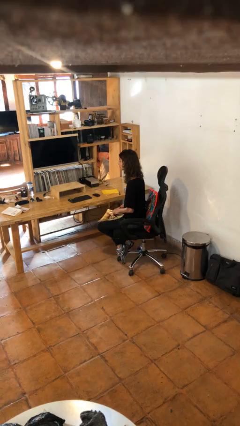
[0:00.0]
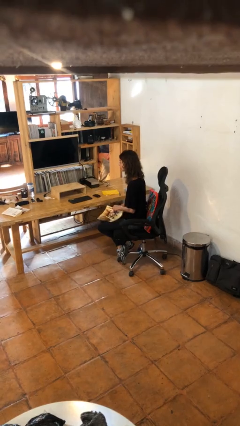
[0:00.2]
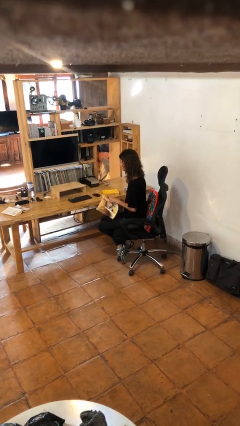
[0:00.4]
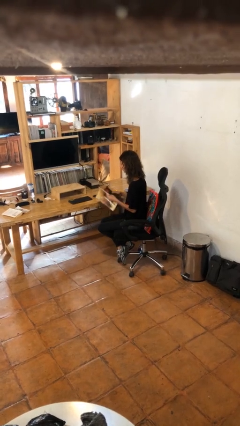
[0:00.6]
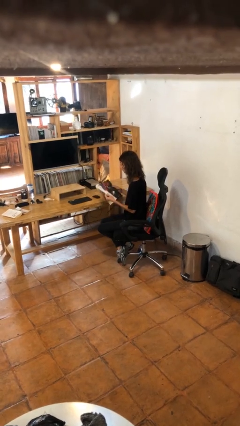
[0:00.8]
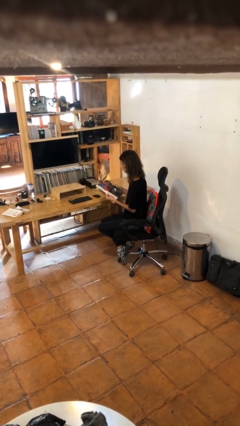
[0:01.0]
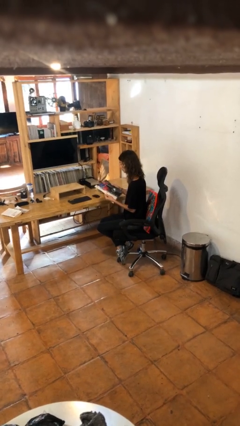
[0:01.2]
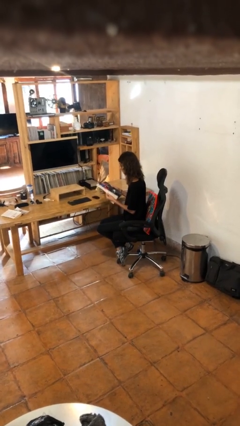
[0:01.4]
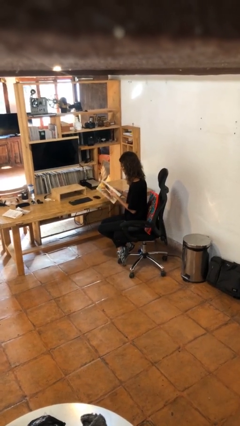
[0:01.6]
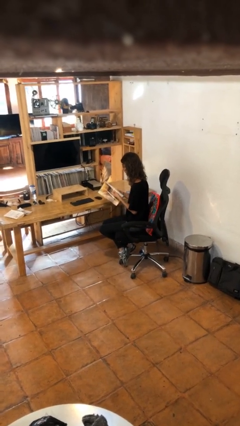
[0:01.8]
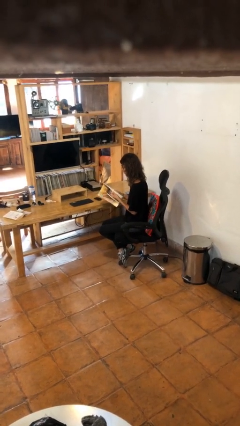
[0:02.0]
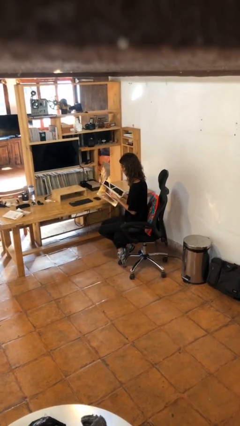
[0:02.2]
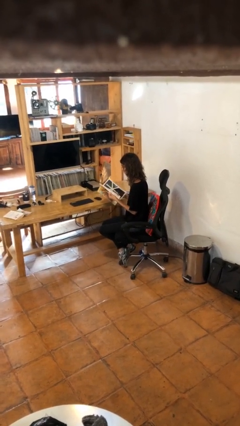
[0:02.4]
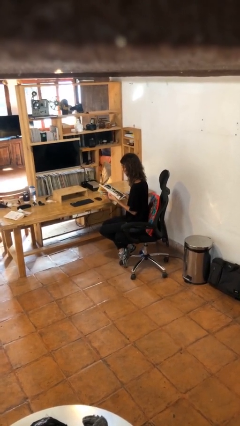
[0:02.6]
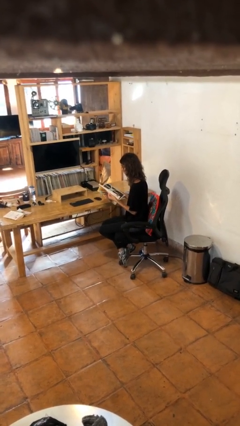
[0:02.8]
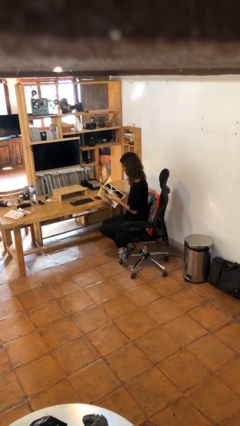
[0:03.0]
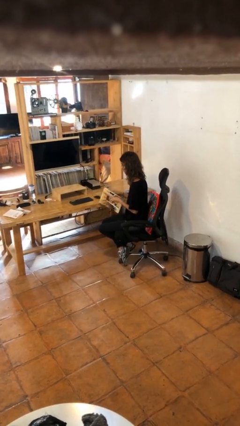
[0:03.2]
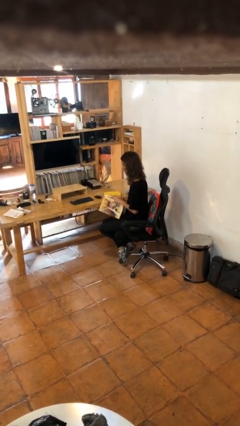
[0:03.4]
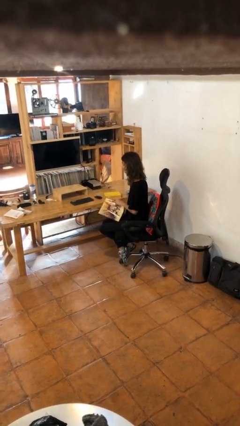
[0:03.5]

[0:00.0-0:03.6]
person reads magazine

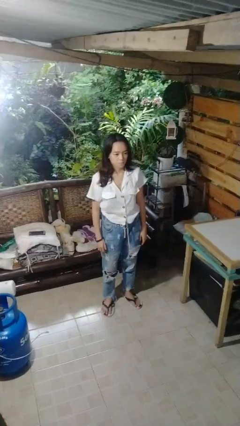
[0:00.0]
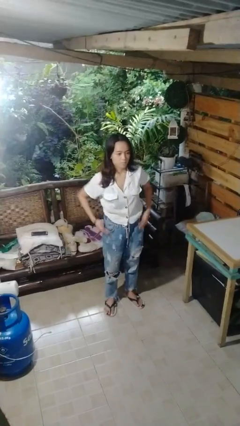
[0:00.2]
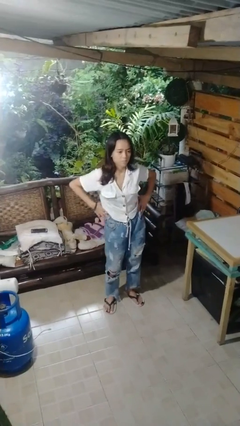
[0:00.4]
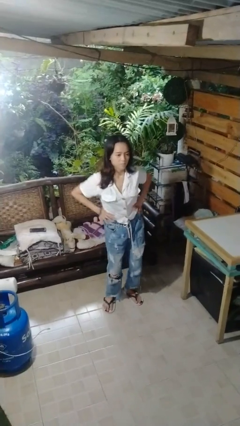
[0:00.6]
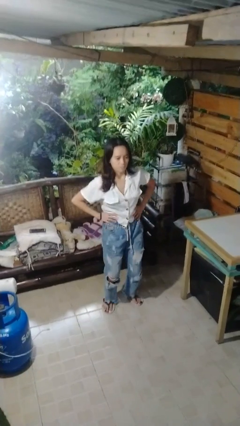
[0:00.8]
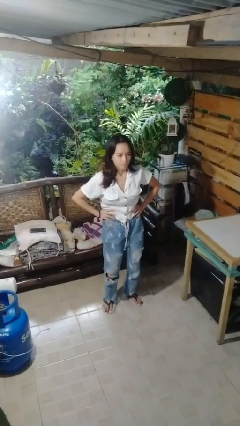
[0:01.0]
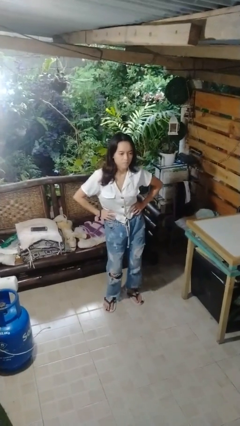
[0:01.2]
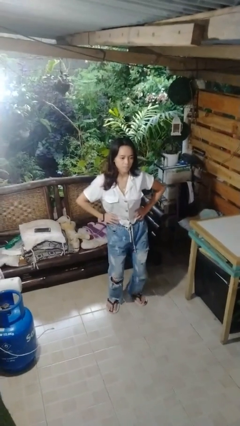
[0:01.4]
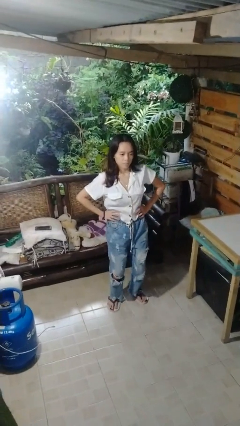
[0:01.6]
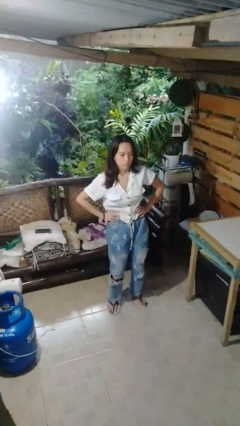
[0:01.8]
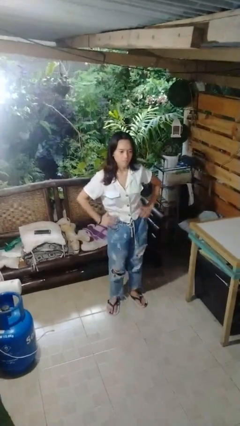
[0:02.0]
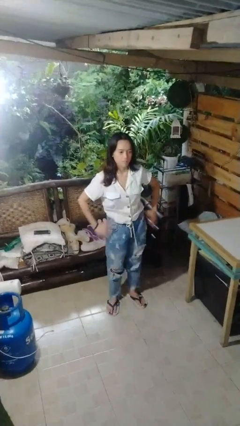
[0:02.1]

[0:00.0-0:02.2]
person wiggles hips

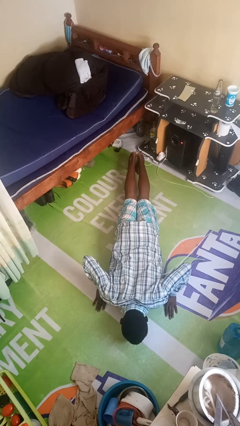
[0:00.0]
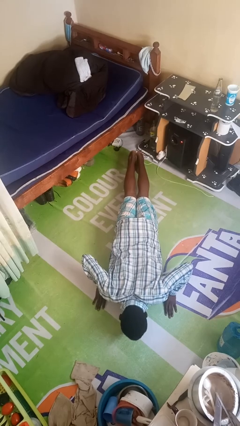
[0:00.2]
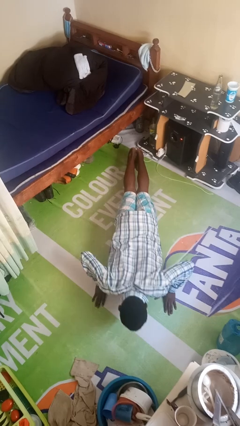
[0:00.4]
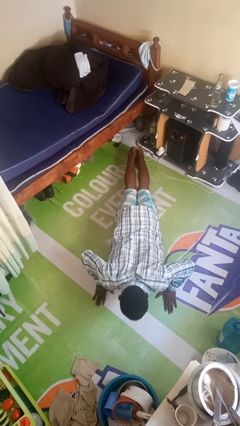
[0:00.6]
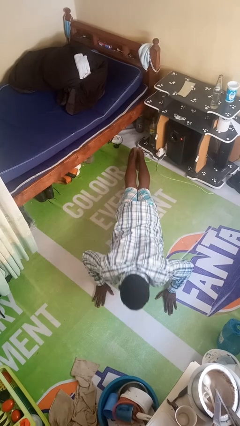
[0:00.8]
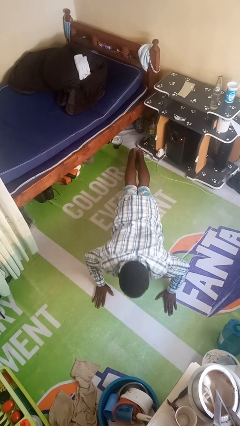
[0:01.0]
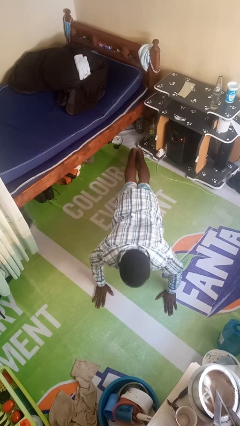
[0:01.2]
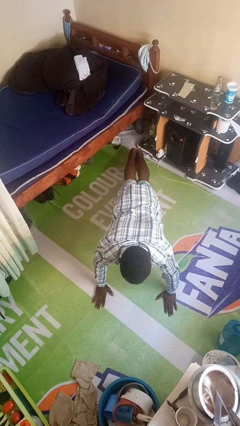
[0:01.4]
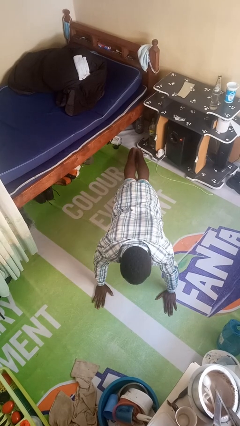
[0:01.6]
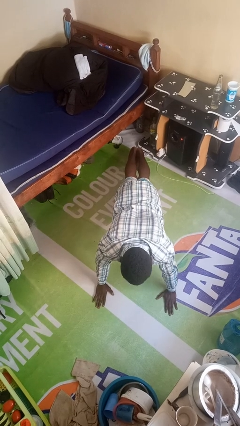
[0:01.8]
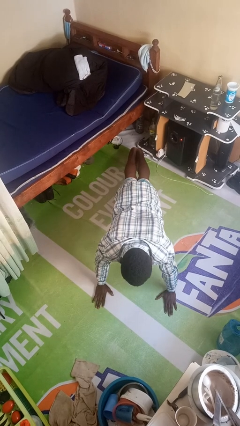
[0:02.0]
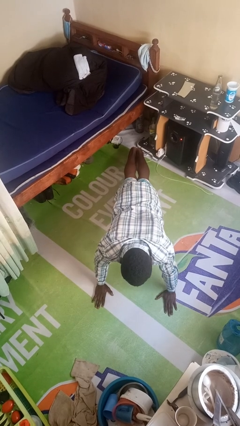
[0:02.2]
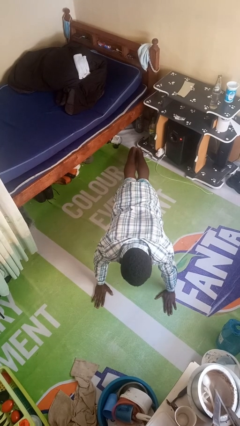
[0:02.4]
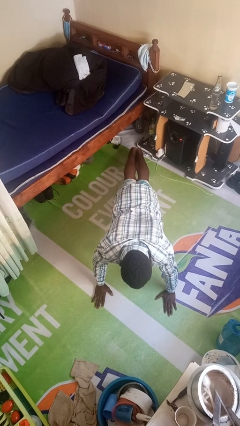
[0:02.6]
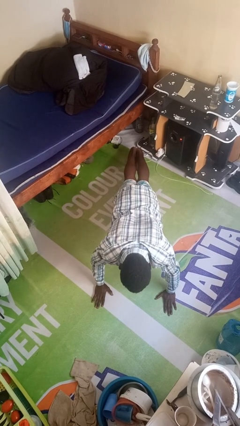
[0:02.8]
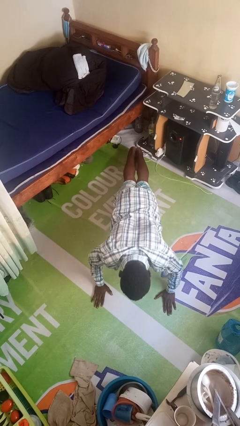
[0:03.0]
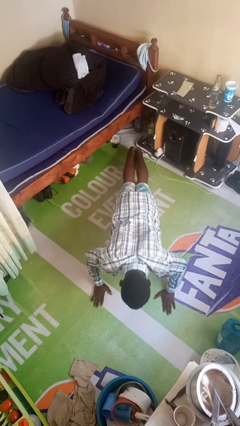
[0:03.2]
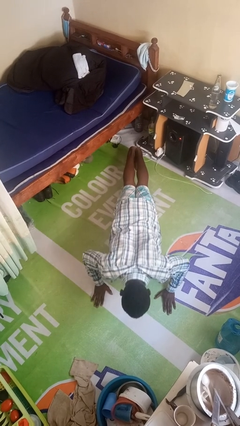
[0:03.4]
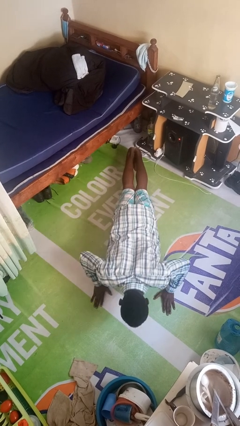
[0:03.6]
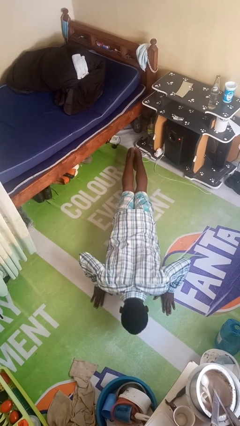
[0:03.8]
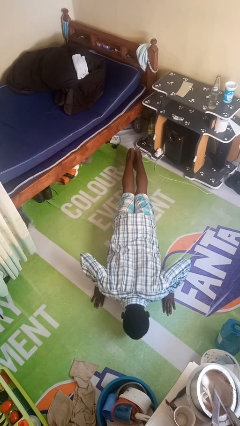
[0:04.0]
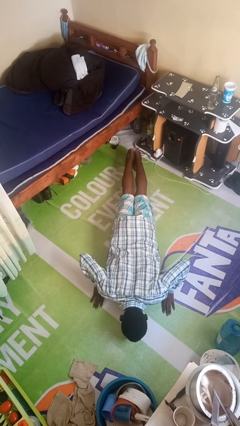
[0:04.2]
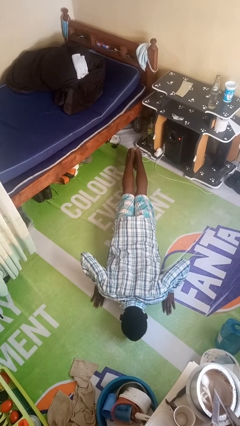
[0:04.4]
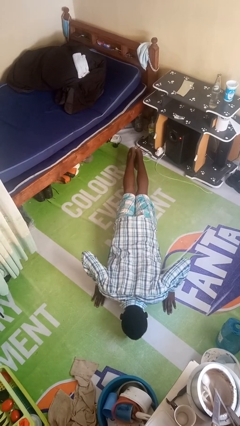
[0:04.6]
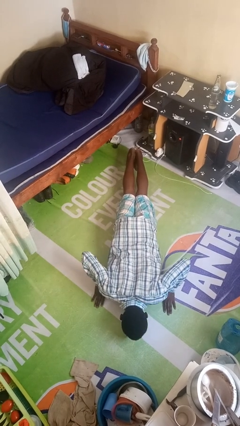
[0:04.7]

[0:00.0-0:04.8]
person exercises with pushup

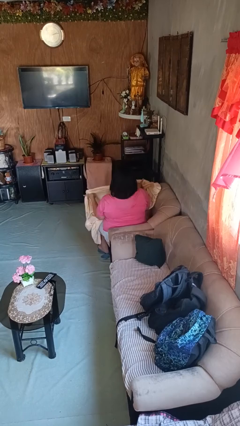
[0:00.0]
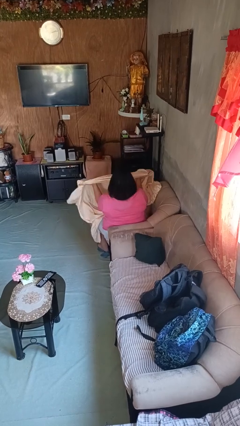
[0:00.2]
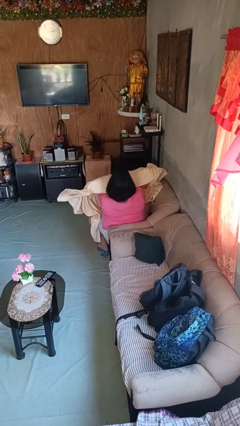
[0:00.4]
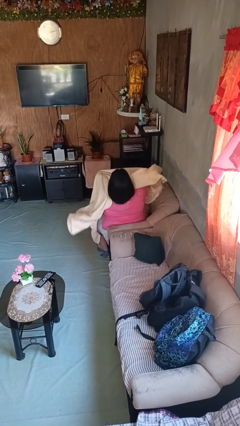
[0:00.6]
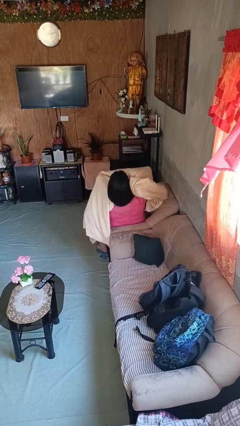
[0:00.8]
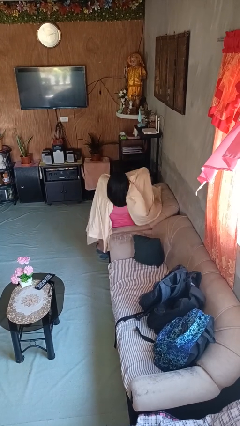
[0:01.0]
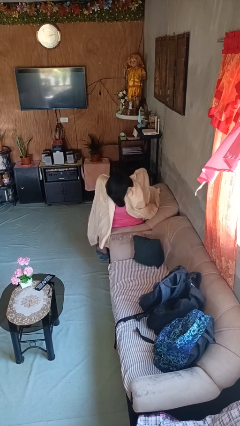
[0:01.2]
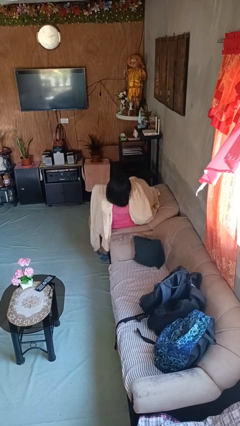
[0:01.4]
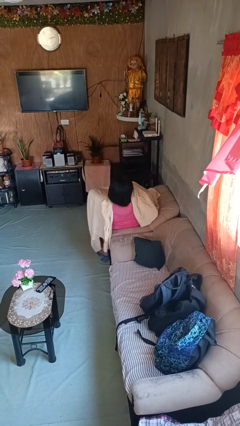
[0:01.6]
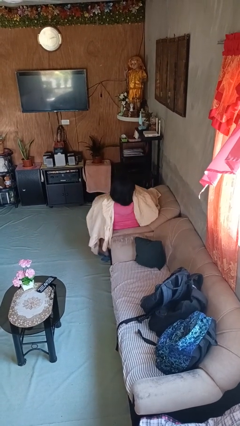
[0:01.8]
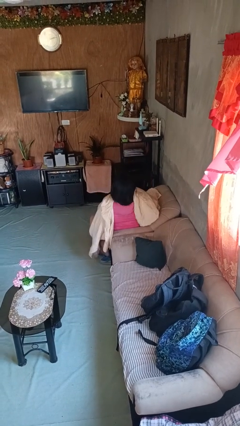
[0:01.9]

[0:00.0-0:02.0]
person covers with blanket

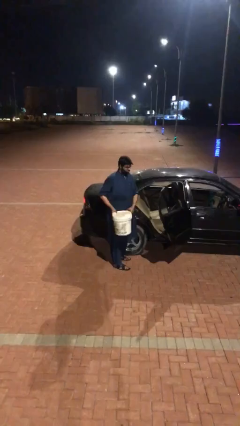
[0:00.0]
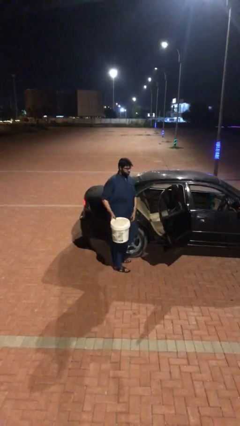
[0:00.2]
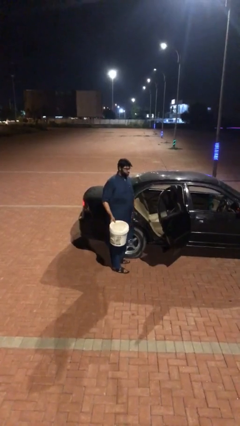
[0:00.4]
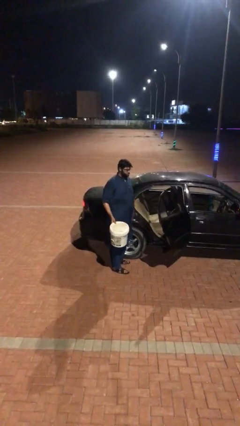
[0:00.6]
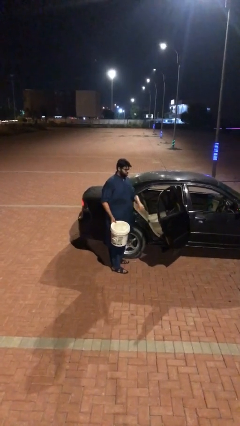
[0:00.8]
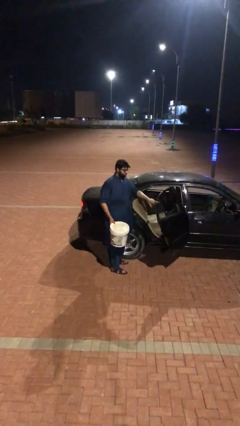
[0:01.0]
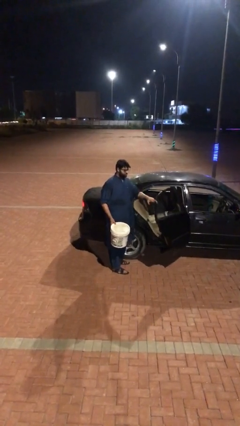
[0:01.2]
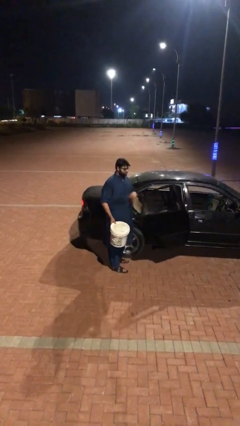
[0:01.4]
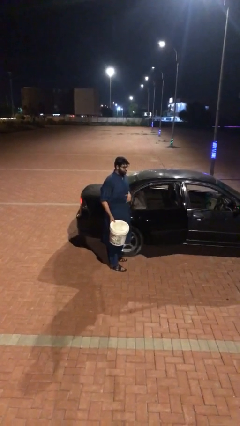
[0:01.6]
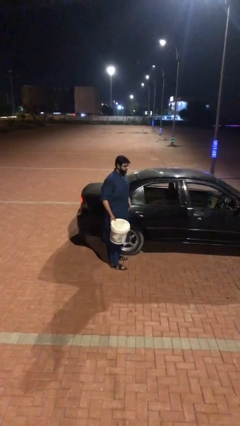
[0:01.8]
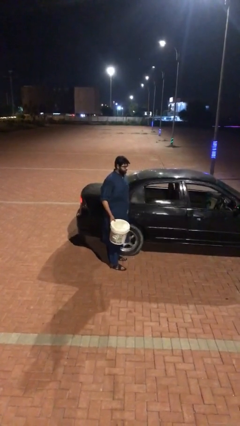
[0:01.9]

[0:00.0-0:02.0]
person closes car door

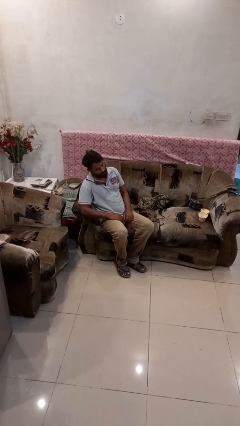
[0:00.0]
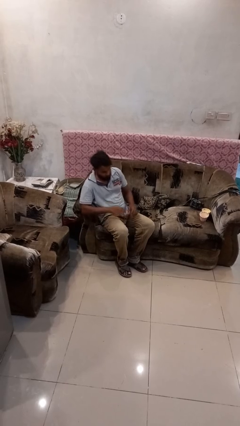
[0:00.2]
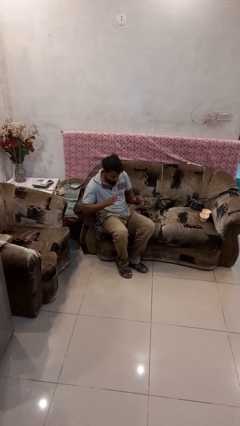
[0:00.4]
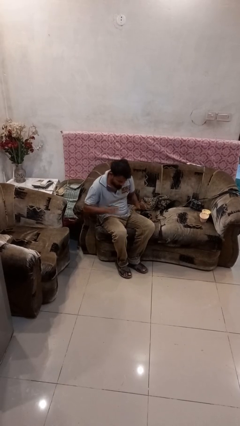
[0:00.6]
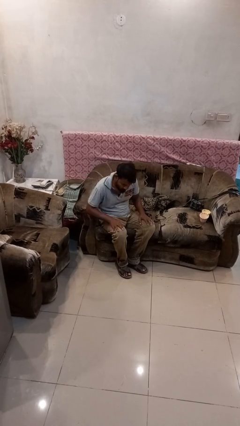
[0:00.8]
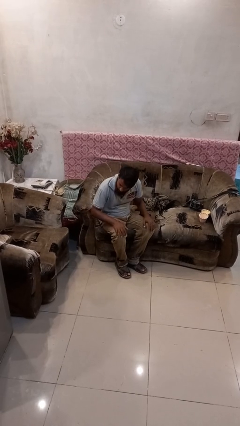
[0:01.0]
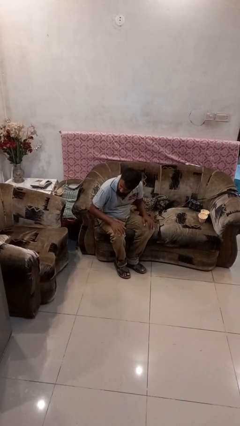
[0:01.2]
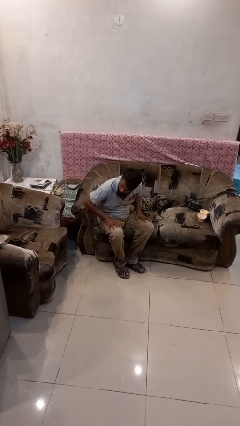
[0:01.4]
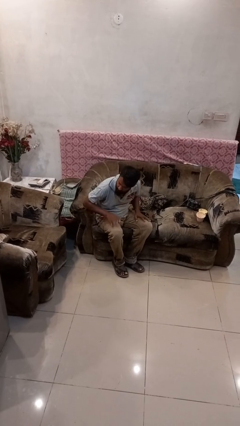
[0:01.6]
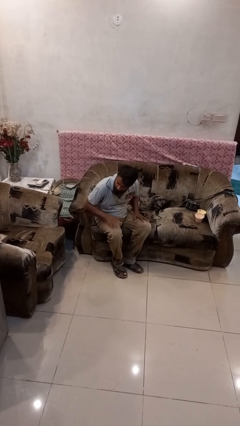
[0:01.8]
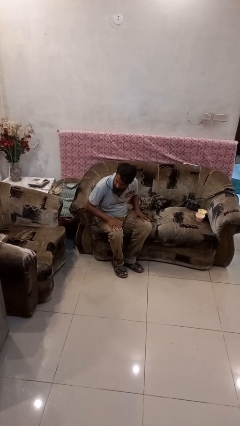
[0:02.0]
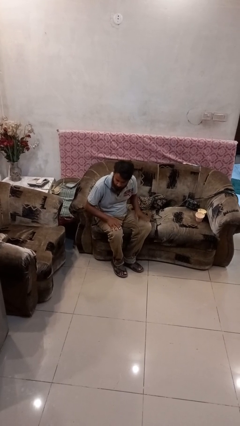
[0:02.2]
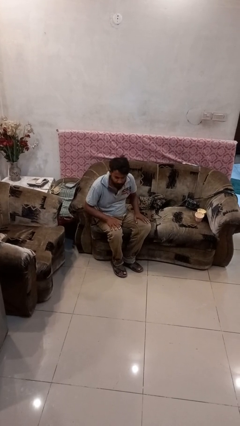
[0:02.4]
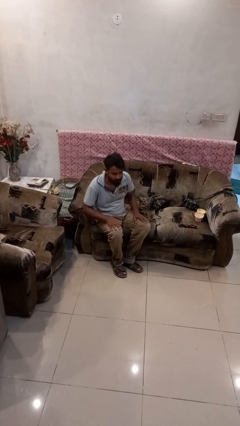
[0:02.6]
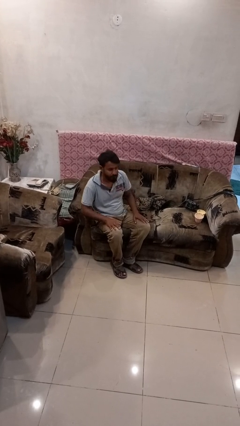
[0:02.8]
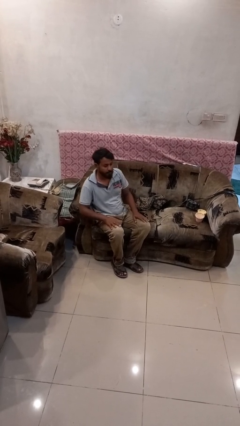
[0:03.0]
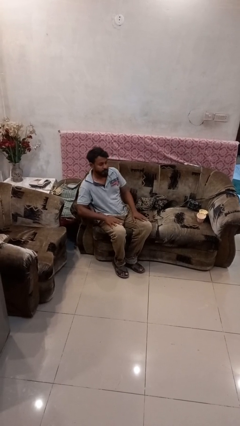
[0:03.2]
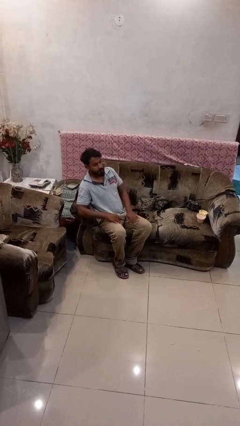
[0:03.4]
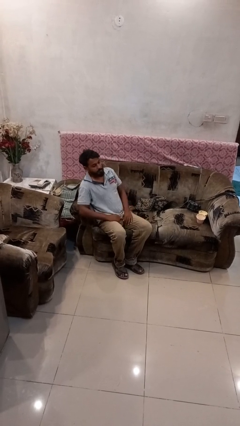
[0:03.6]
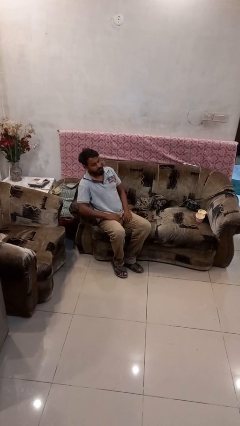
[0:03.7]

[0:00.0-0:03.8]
person slaps hands on thighs
